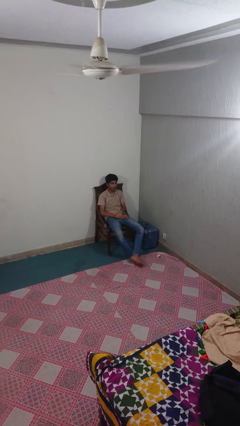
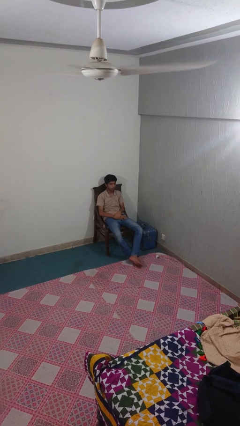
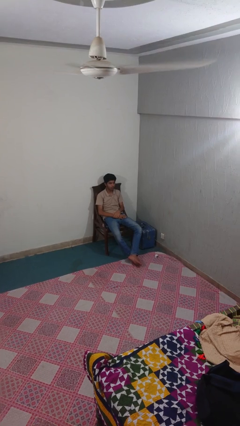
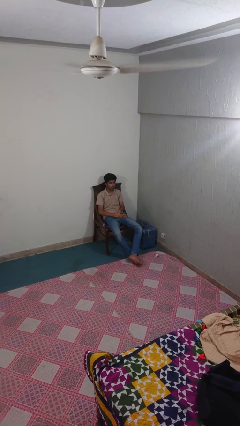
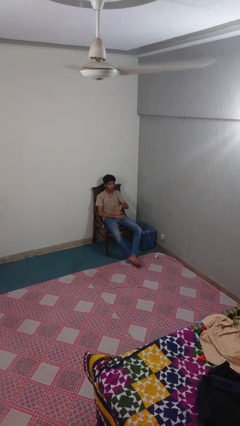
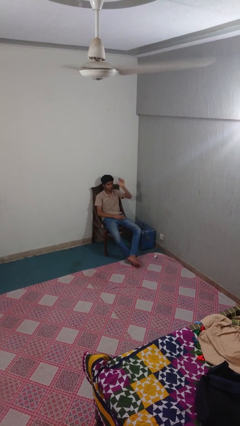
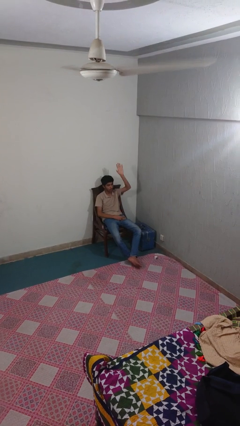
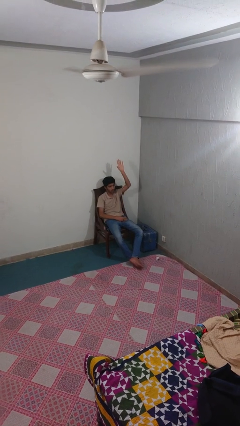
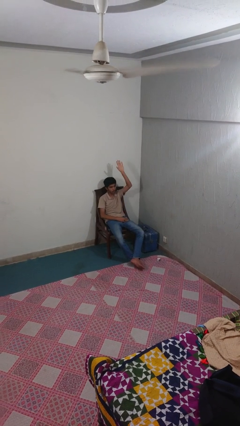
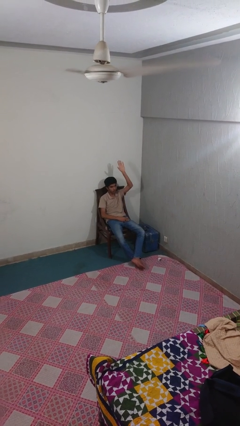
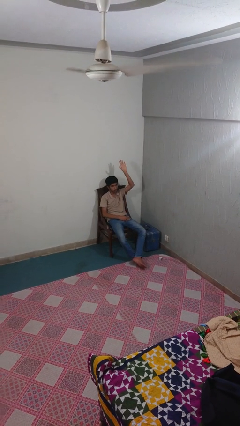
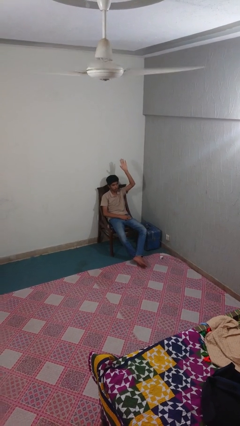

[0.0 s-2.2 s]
person gestures raise hand

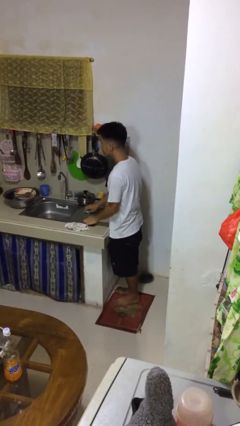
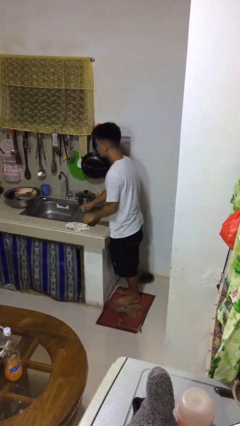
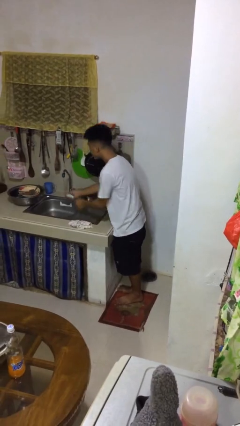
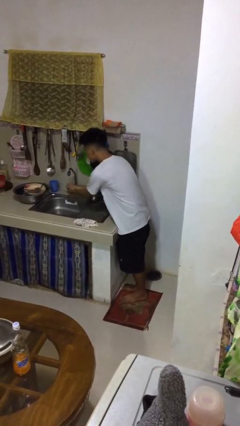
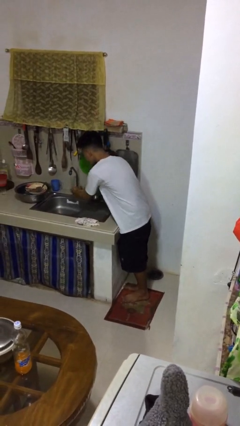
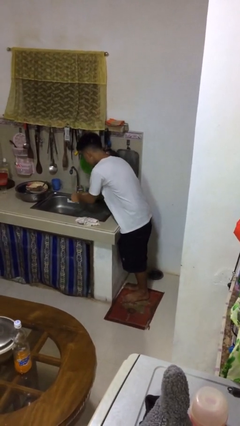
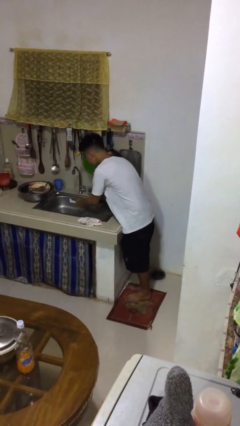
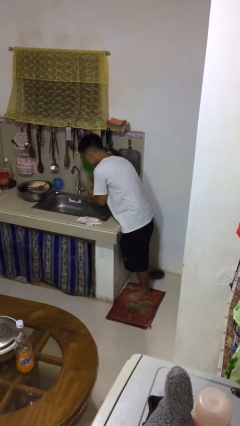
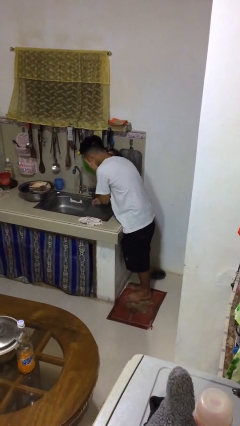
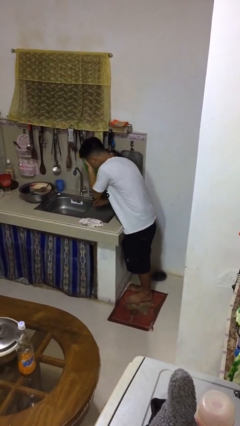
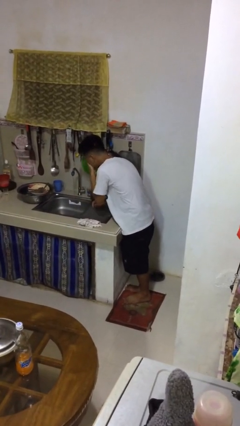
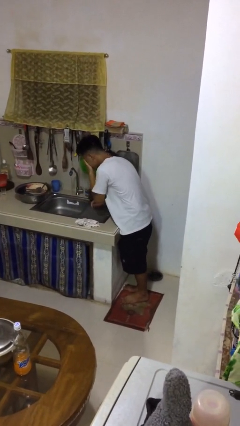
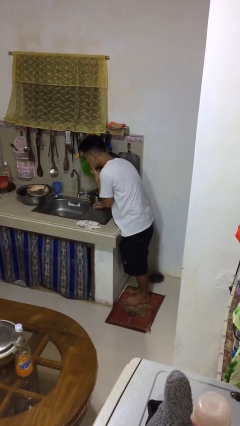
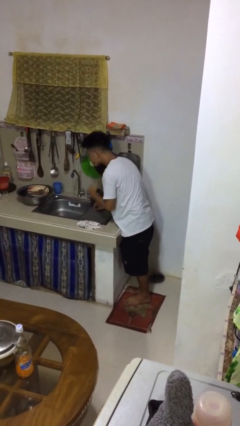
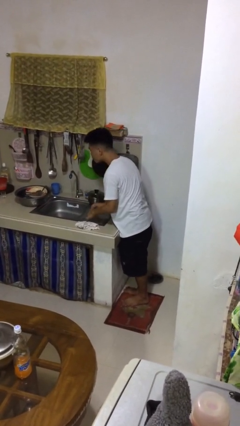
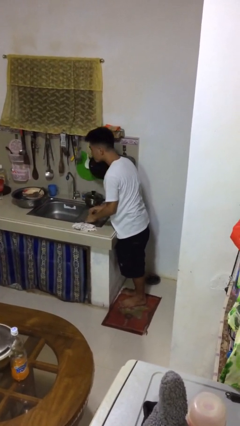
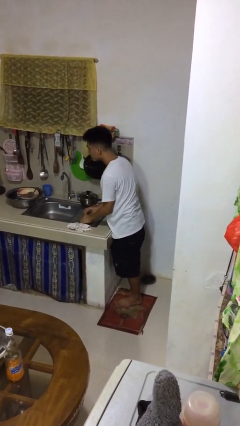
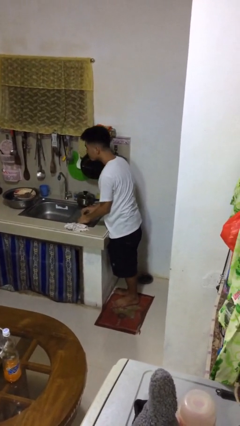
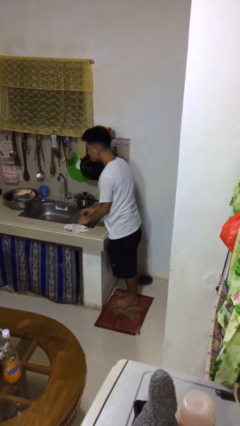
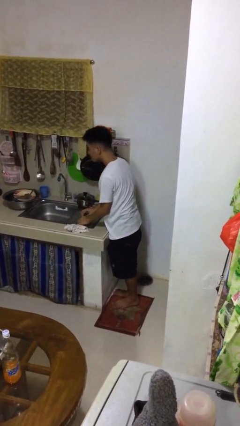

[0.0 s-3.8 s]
person washes face

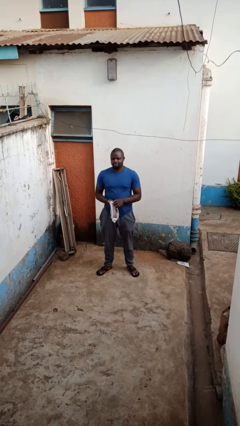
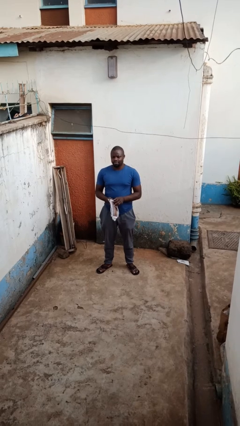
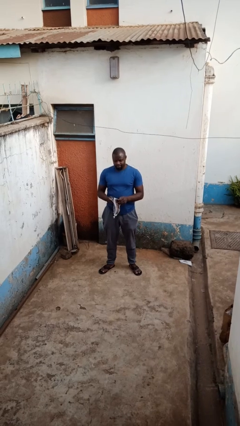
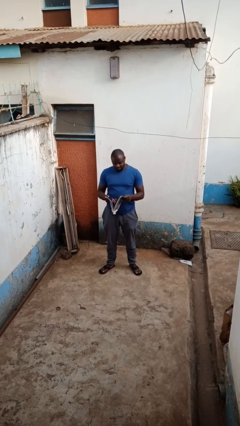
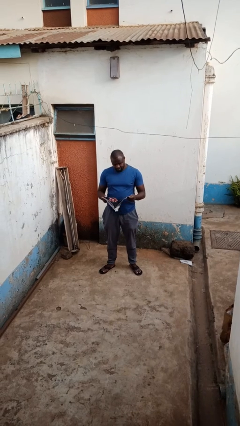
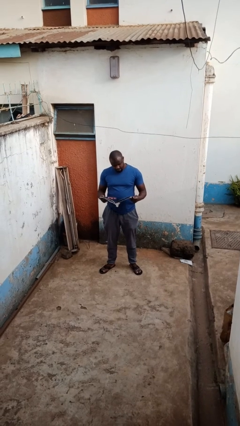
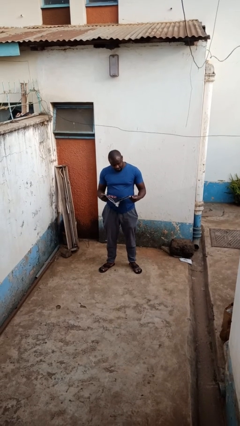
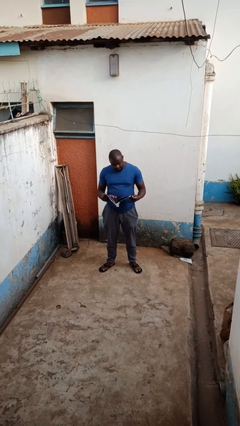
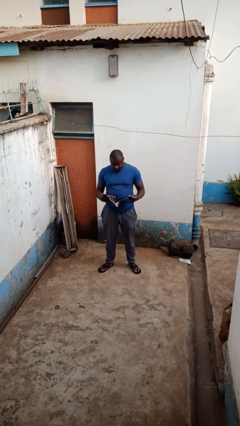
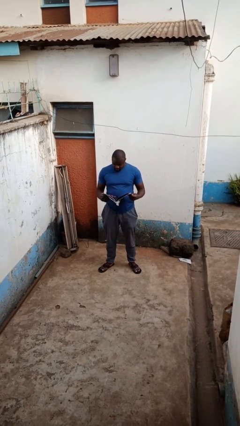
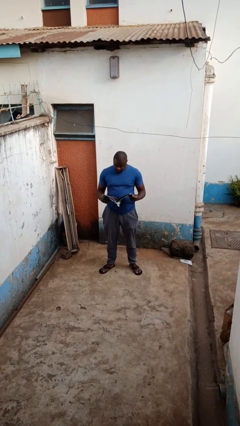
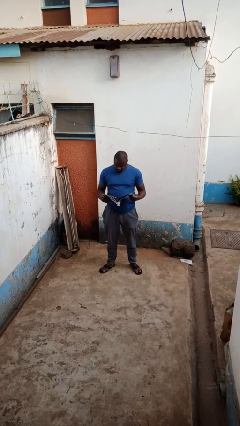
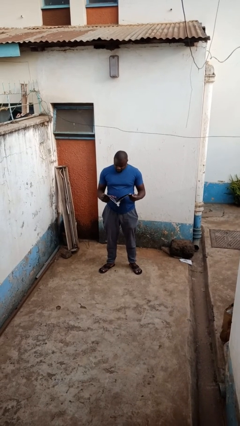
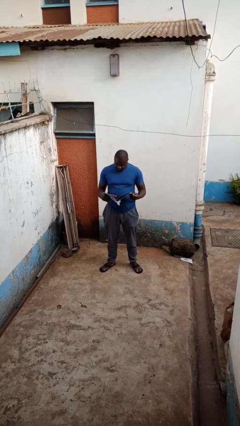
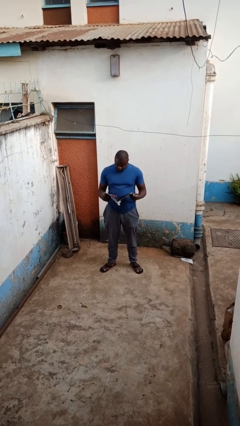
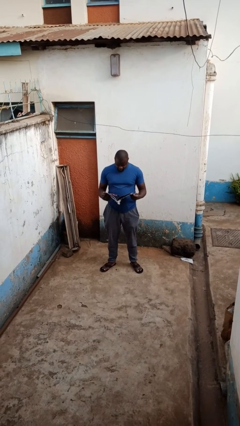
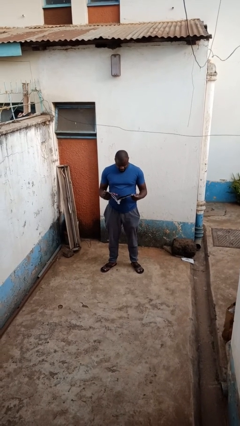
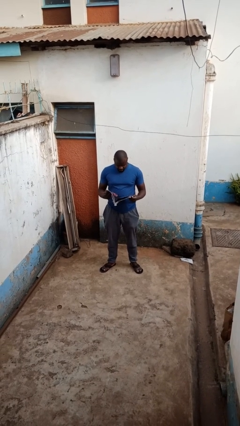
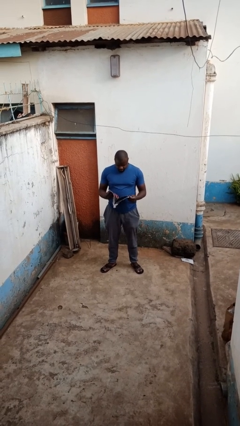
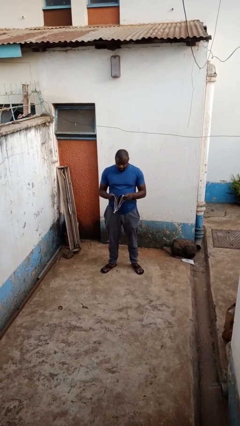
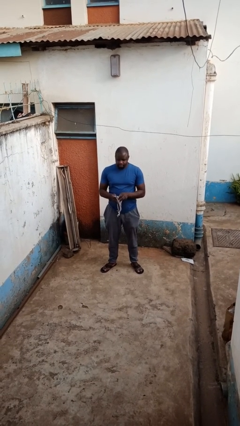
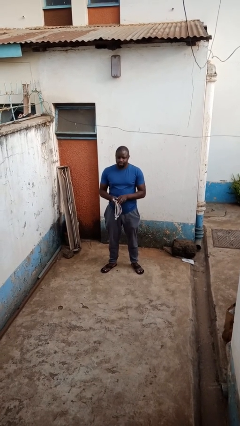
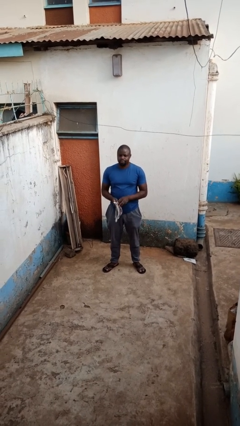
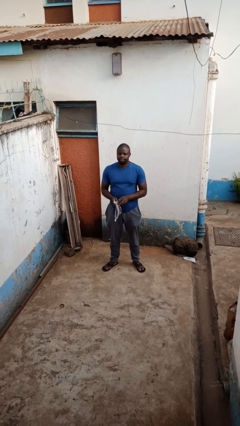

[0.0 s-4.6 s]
person reads magazine

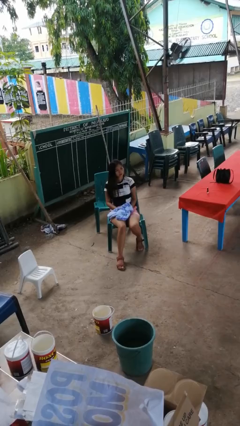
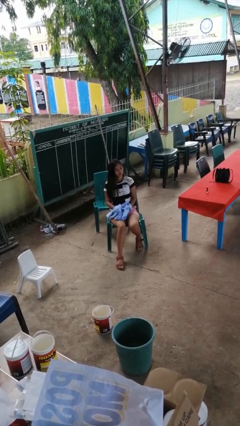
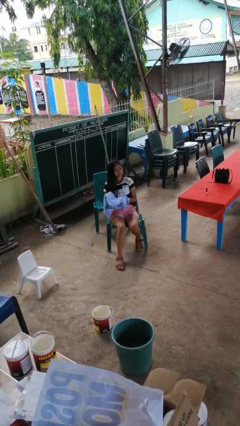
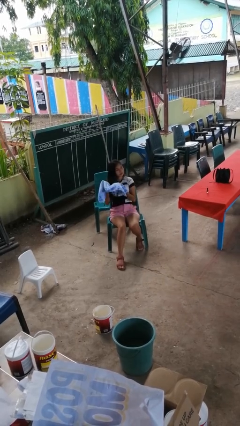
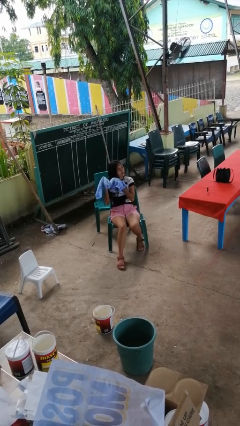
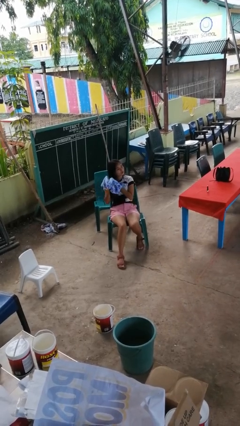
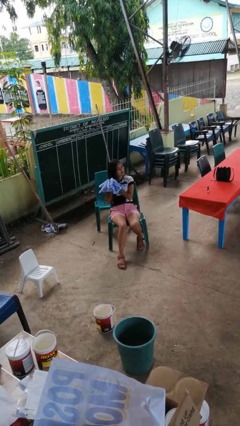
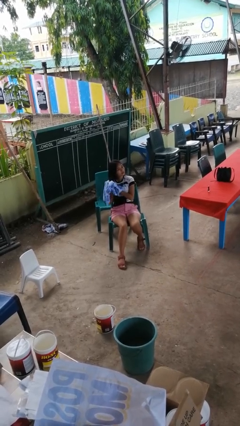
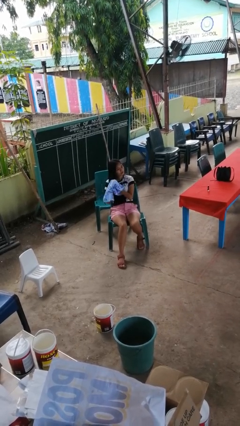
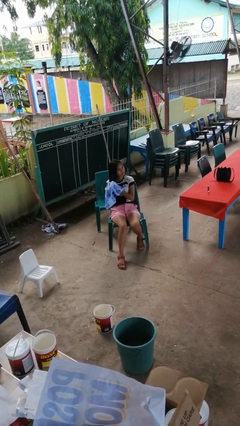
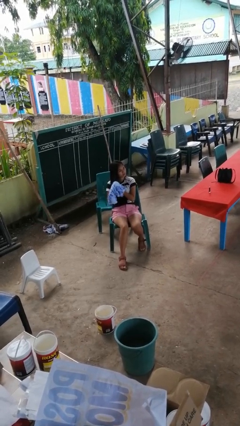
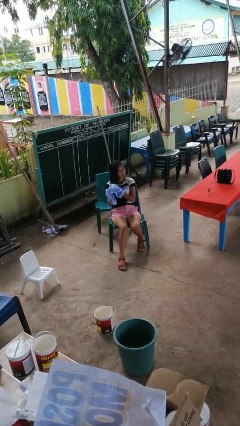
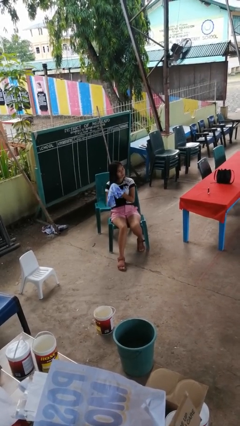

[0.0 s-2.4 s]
person dries hair with towel

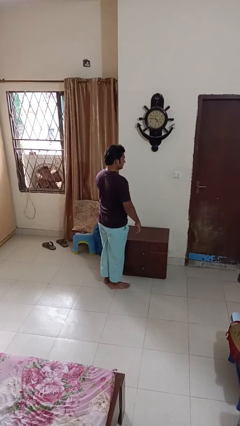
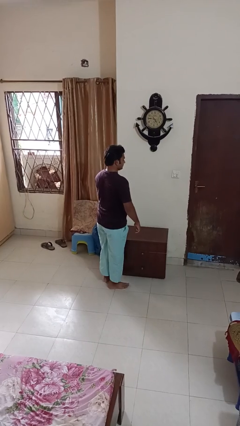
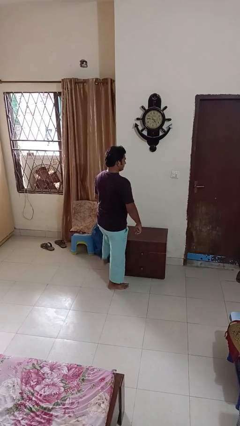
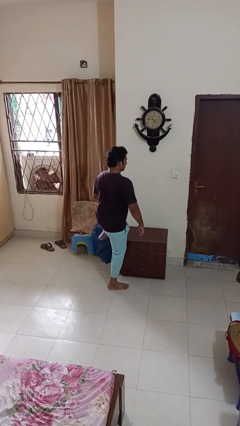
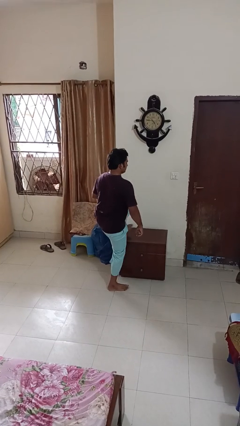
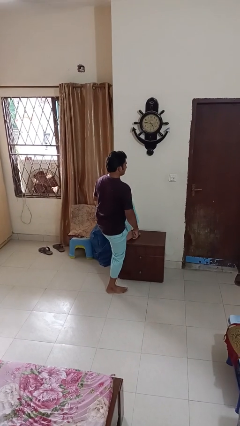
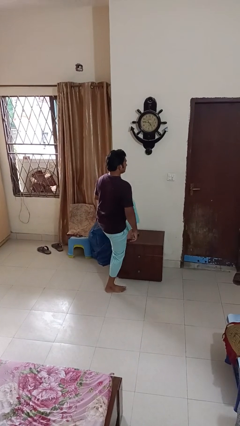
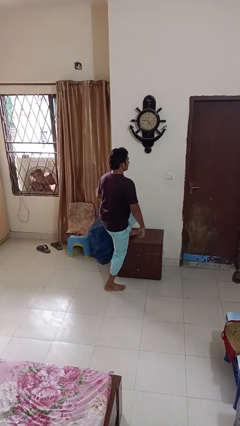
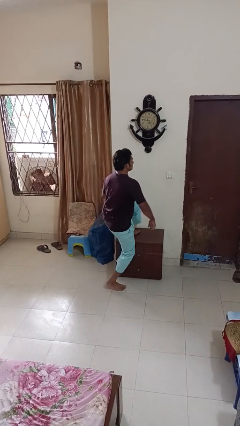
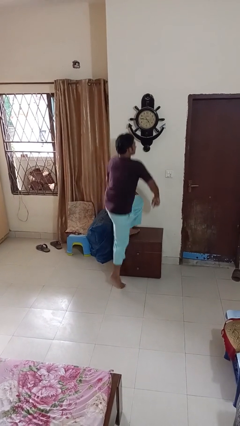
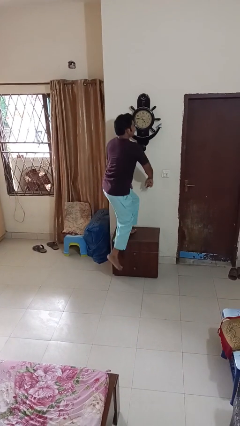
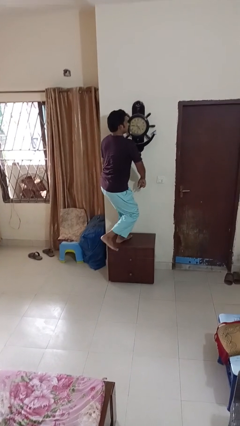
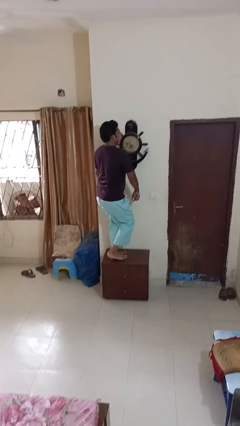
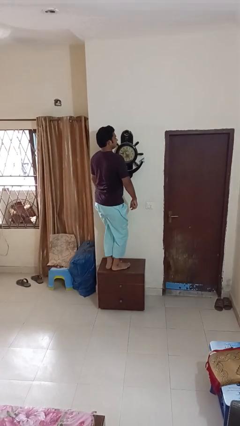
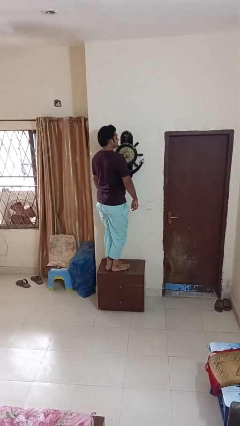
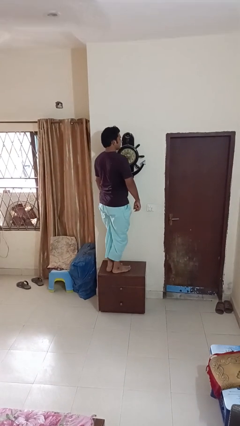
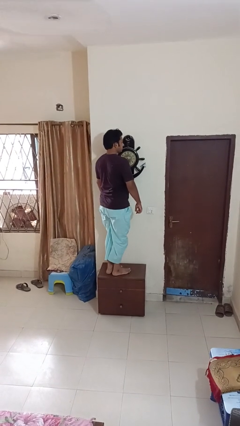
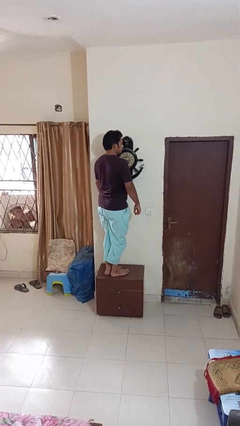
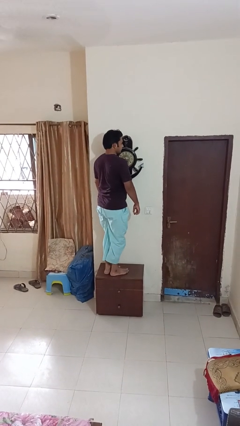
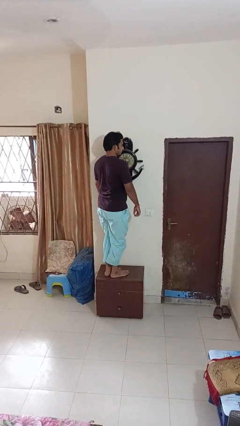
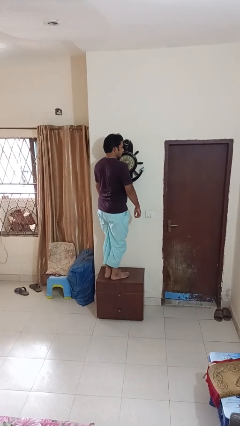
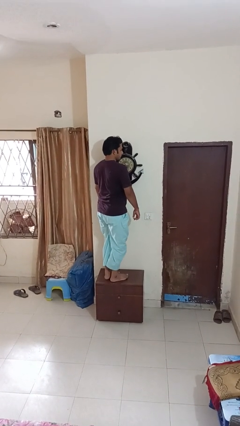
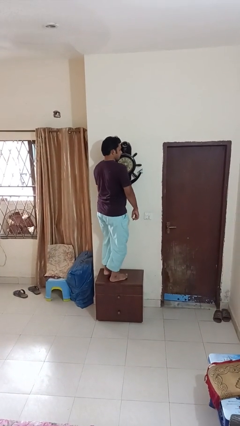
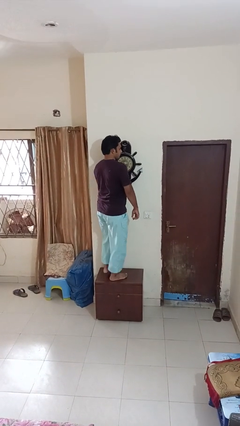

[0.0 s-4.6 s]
person climbs on table

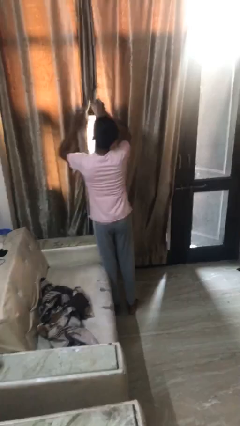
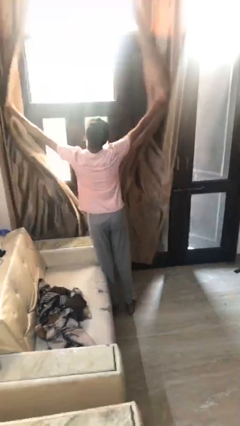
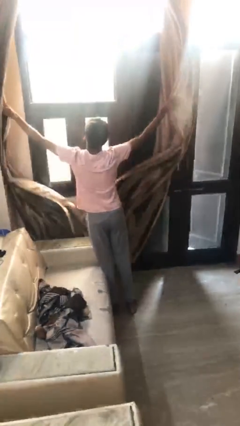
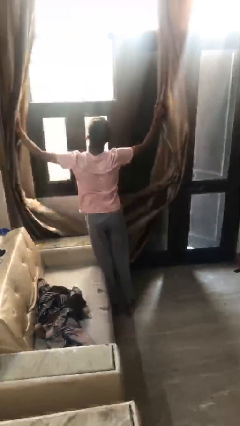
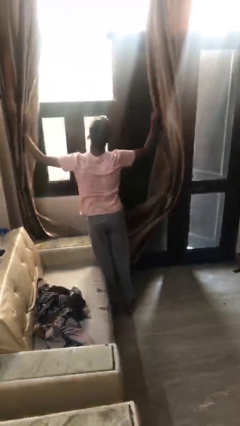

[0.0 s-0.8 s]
person opens curtains
